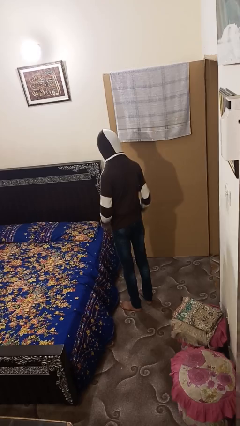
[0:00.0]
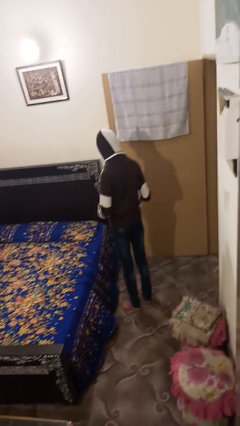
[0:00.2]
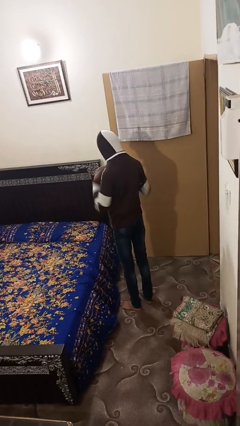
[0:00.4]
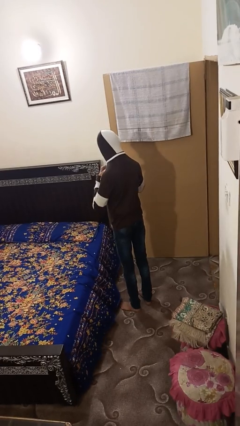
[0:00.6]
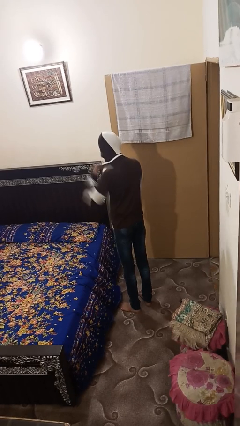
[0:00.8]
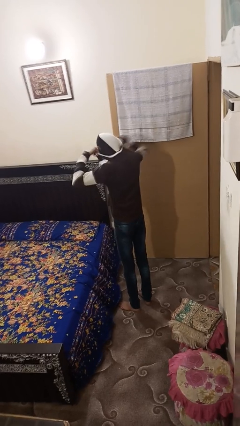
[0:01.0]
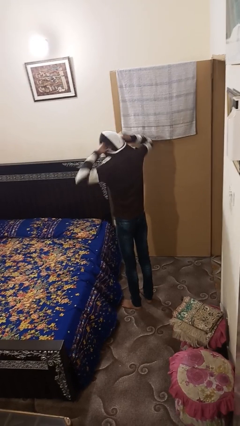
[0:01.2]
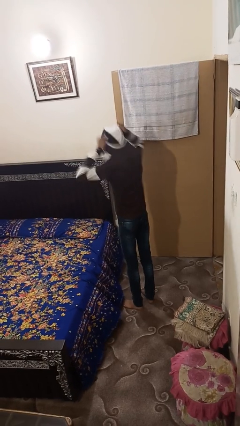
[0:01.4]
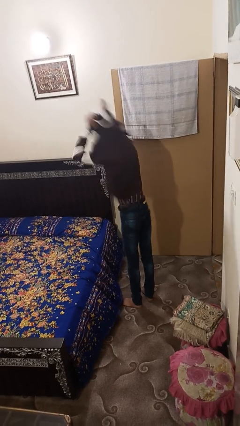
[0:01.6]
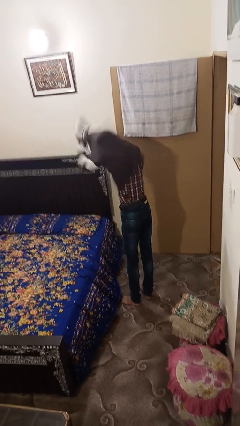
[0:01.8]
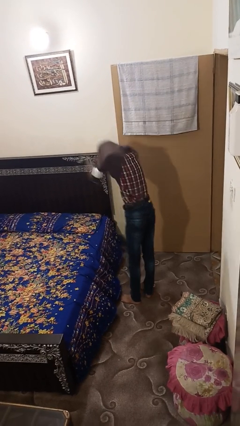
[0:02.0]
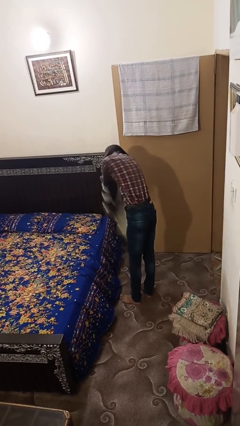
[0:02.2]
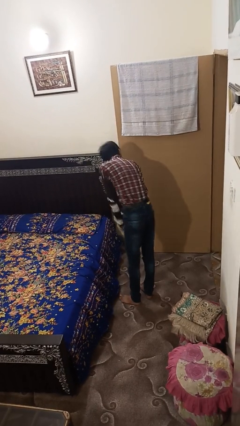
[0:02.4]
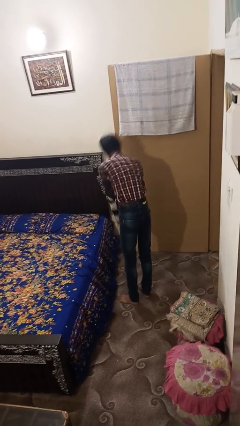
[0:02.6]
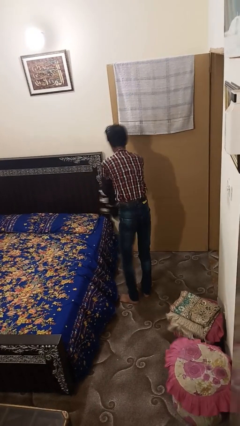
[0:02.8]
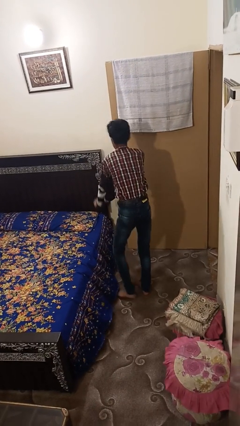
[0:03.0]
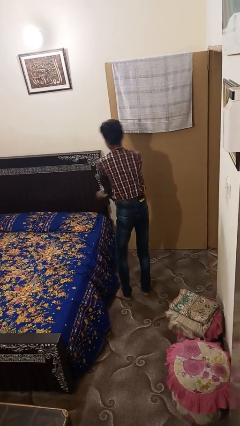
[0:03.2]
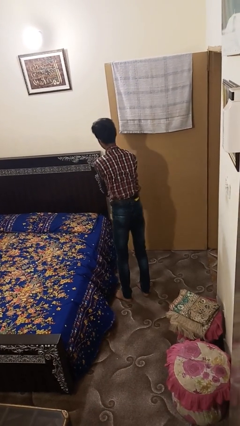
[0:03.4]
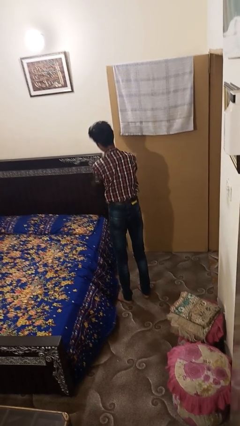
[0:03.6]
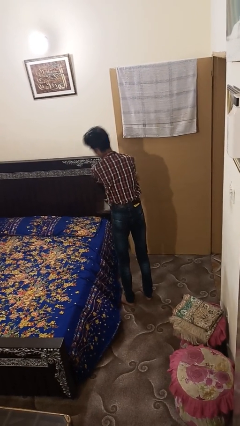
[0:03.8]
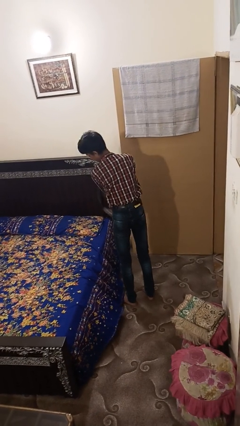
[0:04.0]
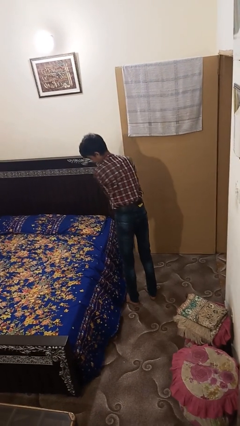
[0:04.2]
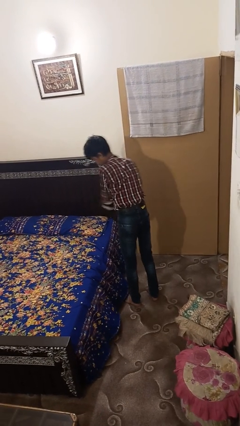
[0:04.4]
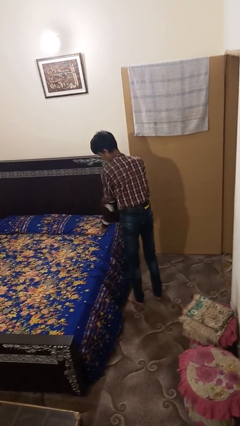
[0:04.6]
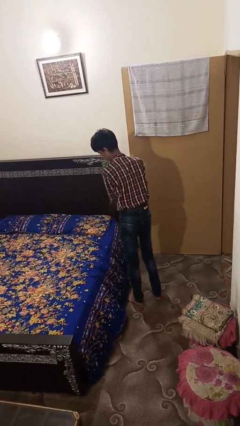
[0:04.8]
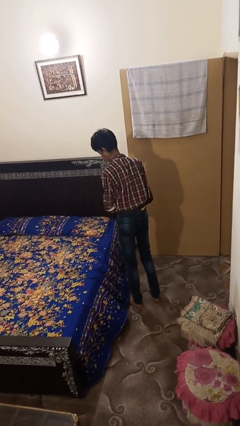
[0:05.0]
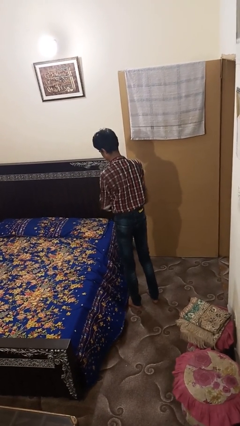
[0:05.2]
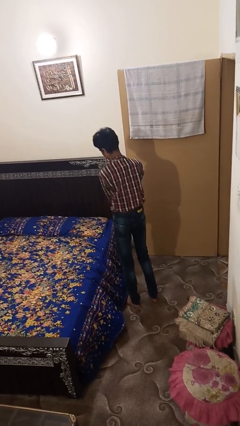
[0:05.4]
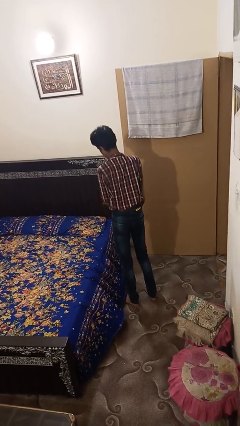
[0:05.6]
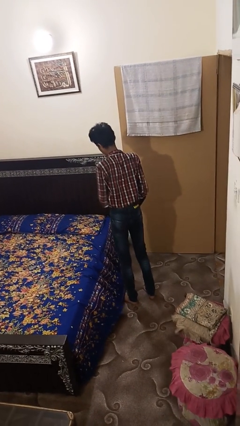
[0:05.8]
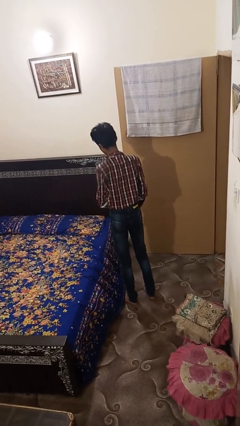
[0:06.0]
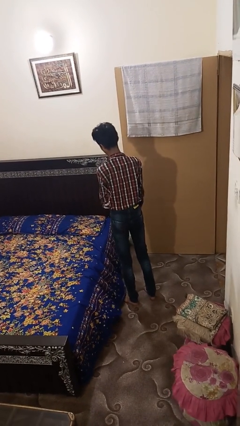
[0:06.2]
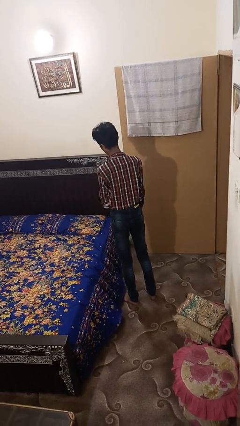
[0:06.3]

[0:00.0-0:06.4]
person takes off hoodie

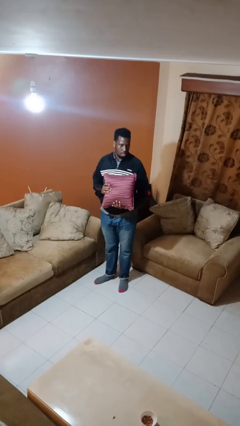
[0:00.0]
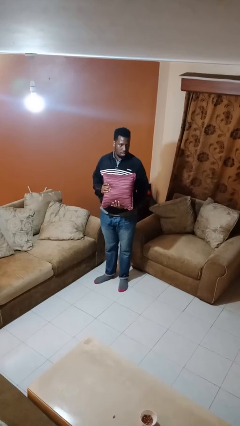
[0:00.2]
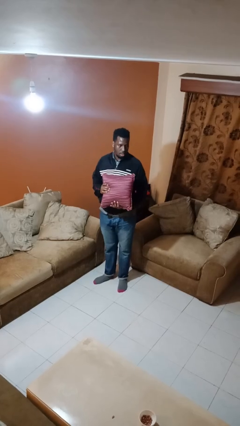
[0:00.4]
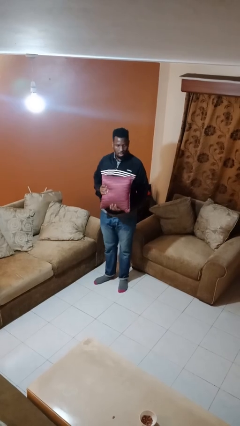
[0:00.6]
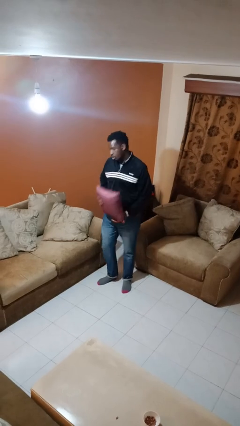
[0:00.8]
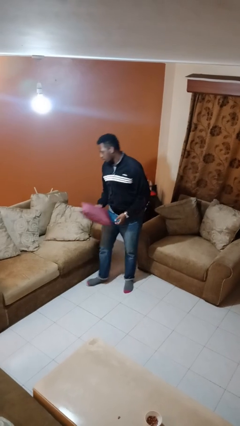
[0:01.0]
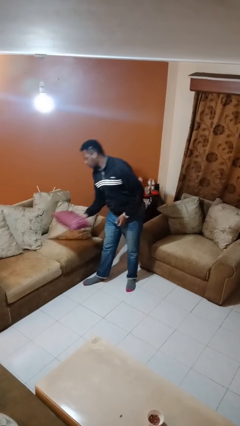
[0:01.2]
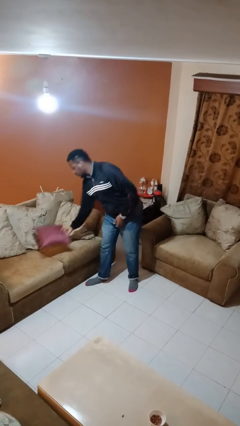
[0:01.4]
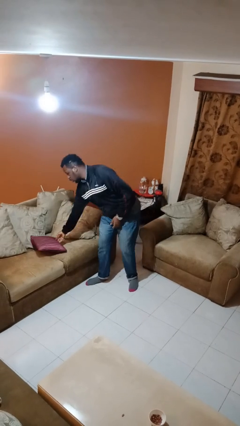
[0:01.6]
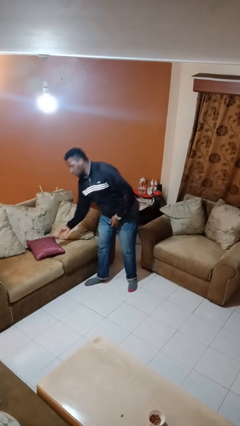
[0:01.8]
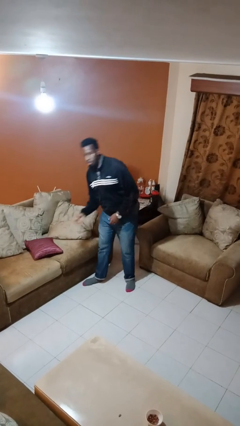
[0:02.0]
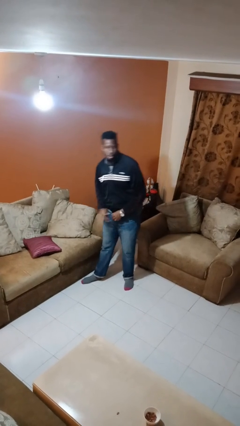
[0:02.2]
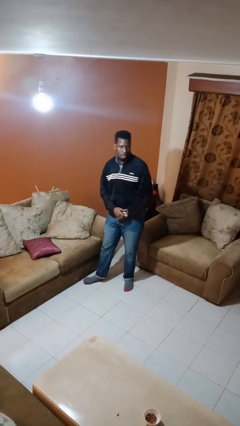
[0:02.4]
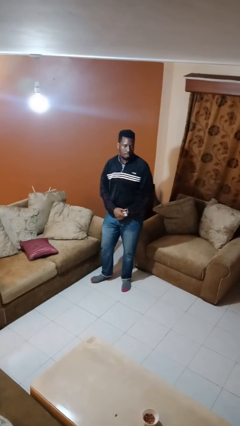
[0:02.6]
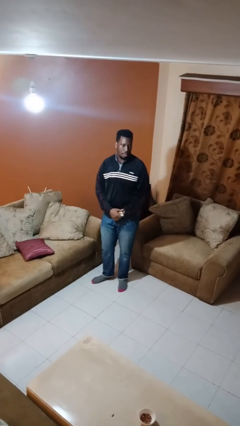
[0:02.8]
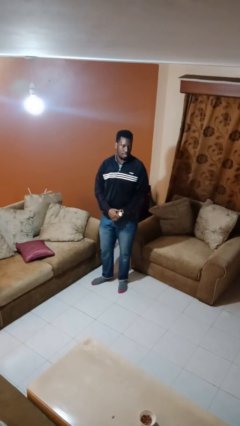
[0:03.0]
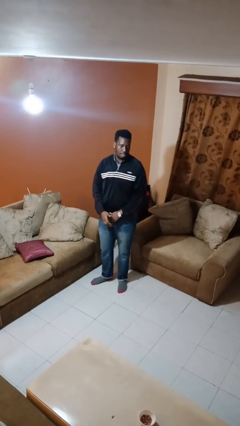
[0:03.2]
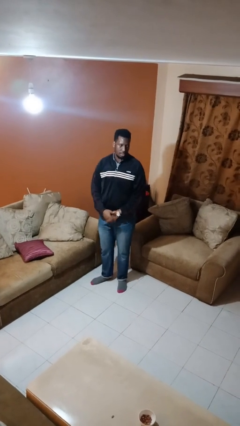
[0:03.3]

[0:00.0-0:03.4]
person puts down object on couch

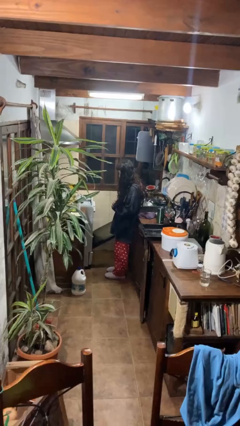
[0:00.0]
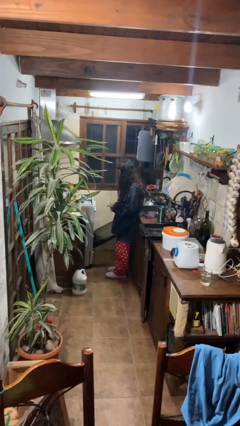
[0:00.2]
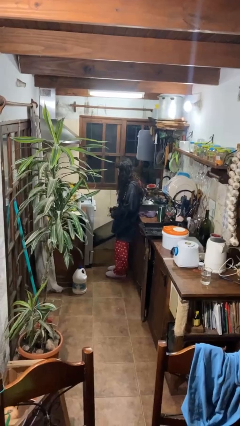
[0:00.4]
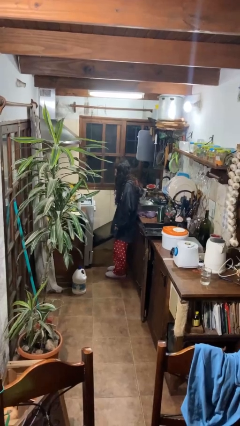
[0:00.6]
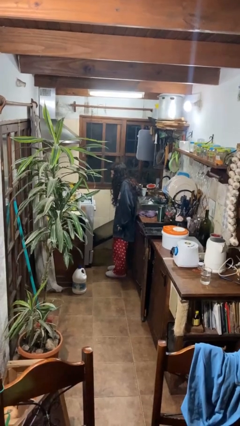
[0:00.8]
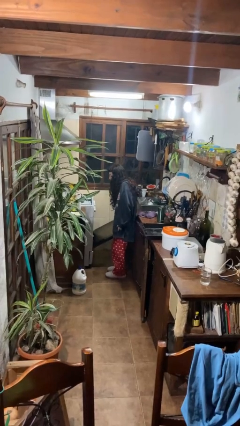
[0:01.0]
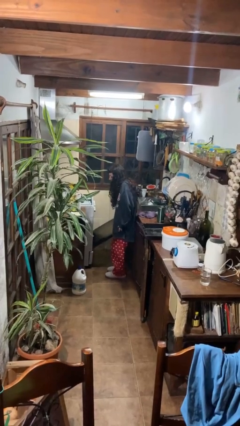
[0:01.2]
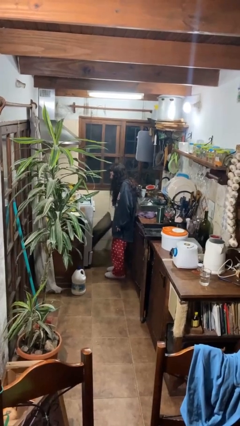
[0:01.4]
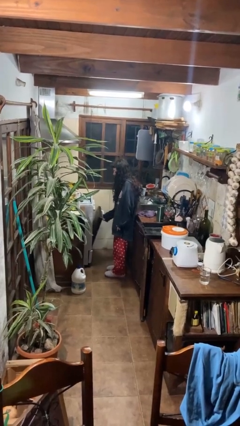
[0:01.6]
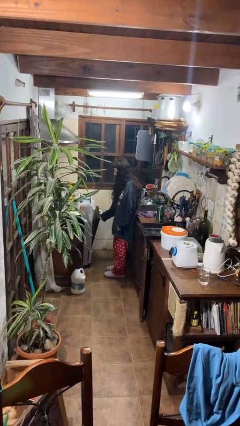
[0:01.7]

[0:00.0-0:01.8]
person closes oven door

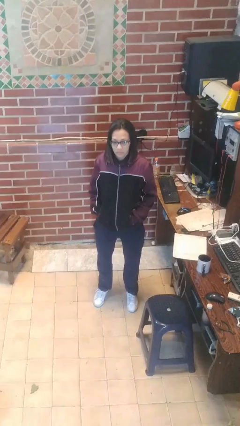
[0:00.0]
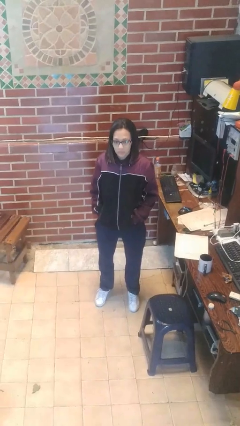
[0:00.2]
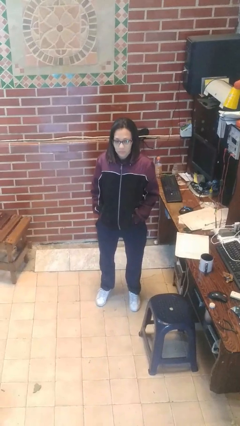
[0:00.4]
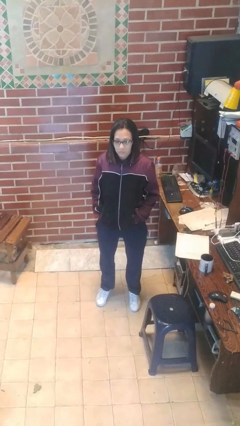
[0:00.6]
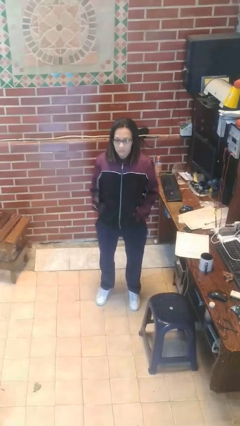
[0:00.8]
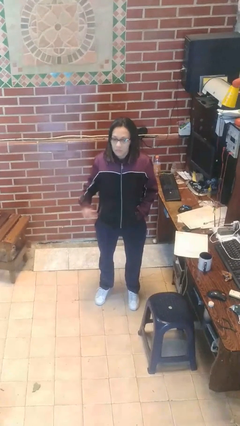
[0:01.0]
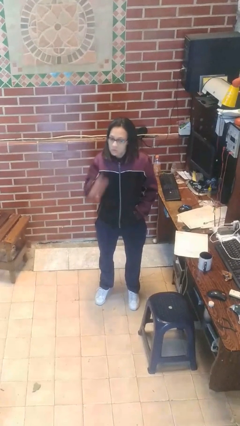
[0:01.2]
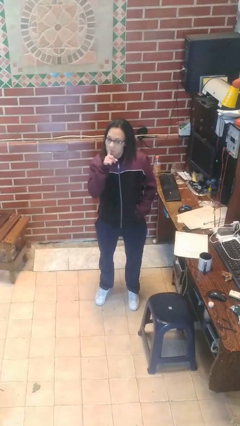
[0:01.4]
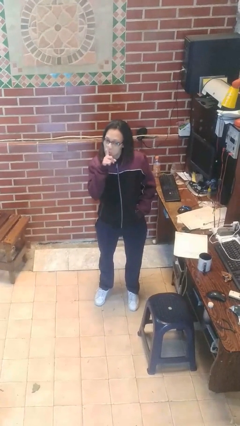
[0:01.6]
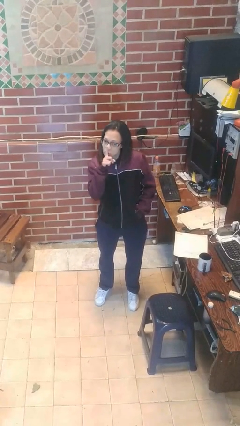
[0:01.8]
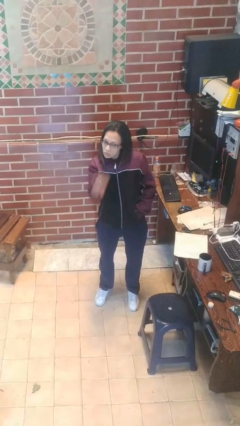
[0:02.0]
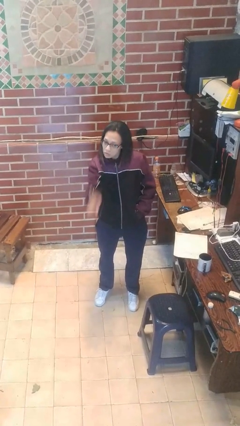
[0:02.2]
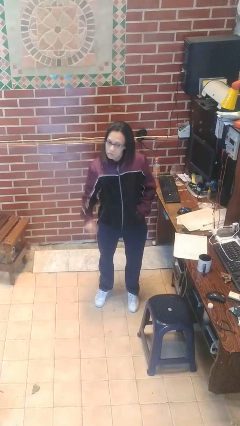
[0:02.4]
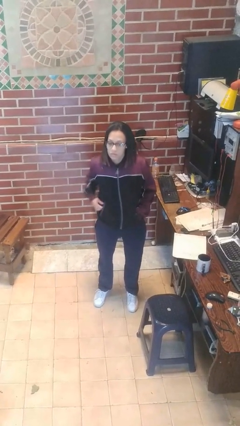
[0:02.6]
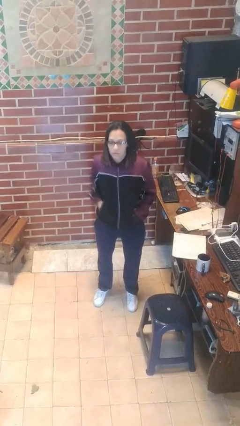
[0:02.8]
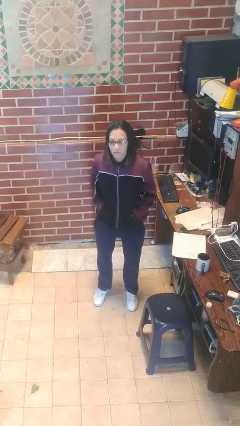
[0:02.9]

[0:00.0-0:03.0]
person gestures be quiet

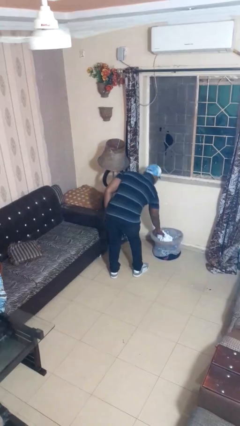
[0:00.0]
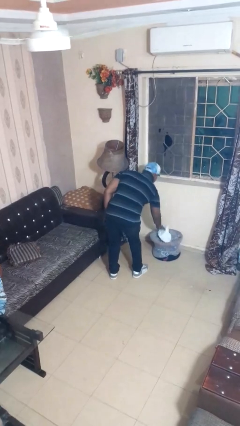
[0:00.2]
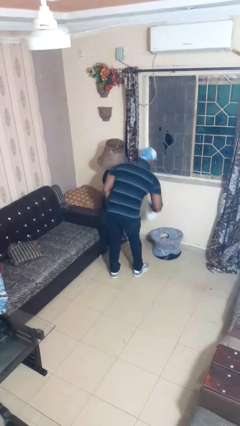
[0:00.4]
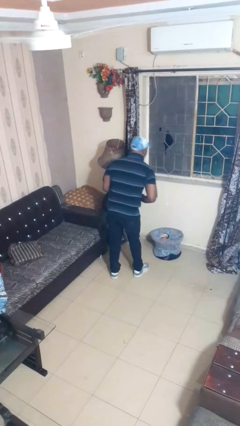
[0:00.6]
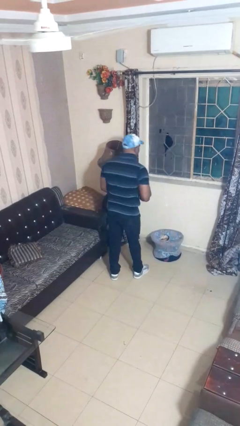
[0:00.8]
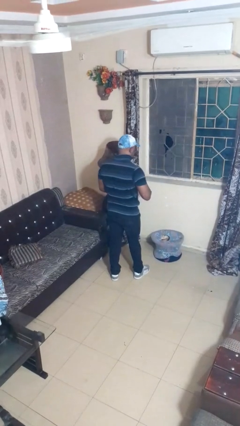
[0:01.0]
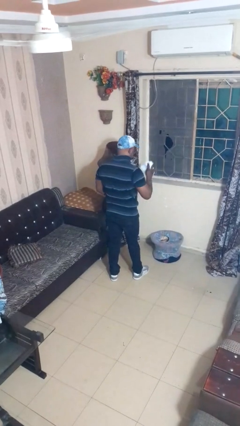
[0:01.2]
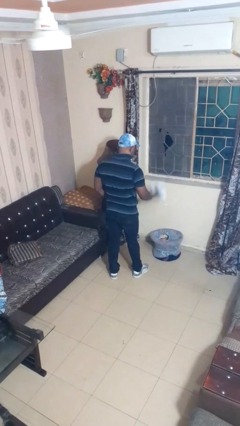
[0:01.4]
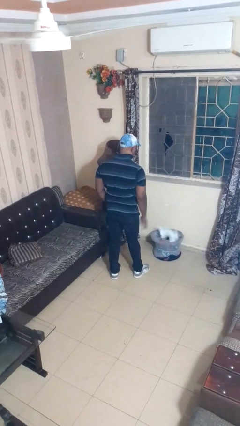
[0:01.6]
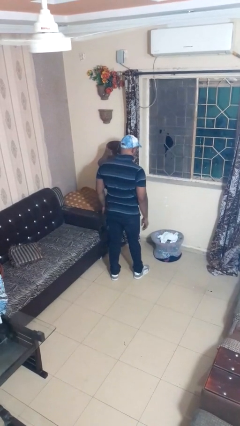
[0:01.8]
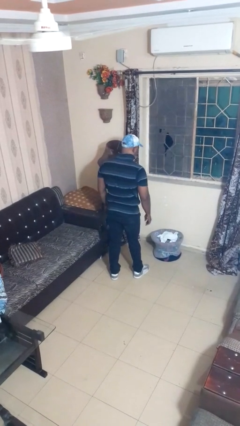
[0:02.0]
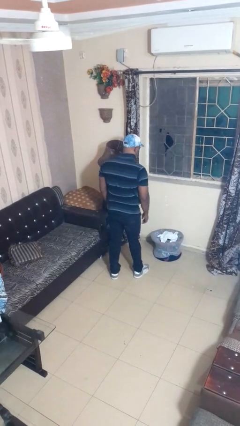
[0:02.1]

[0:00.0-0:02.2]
person puts object into basket

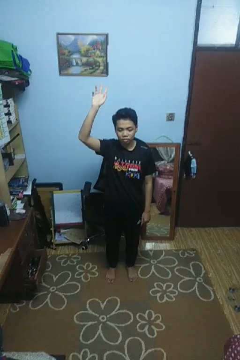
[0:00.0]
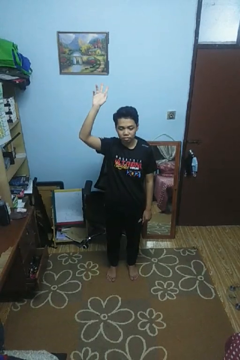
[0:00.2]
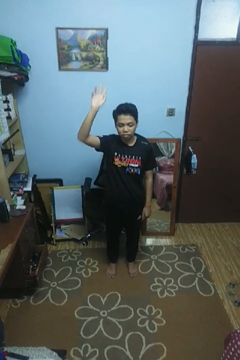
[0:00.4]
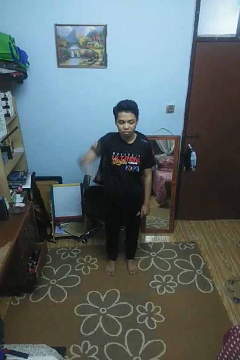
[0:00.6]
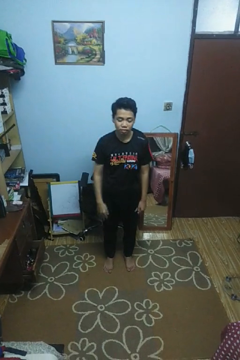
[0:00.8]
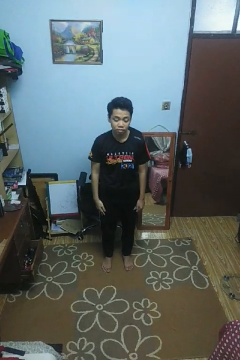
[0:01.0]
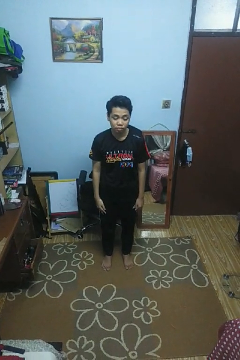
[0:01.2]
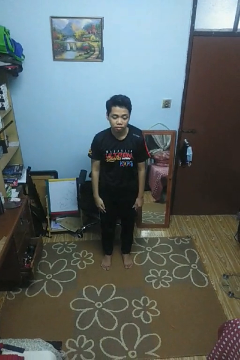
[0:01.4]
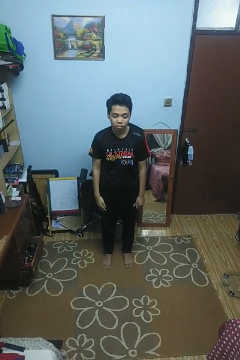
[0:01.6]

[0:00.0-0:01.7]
person gestures lower hand
